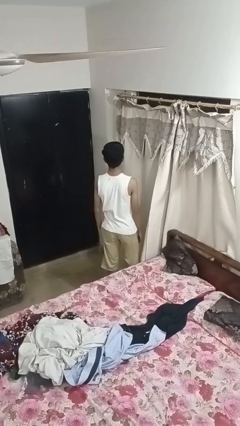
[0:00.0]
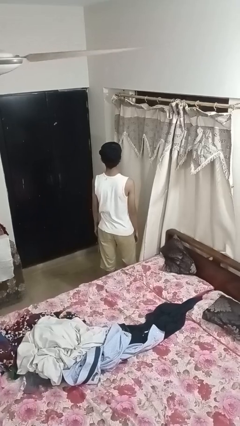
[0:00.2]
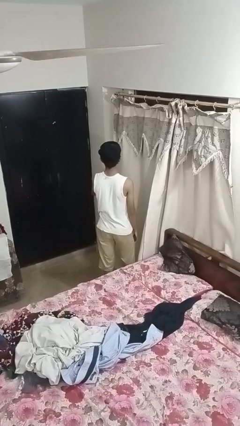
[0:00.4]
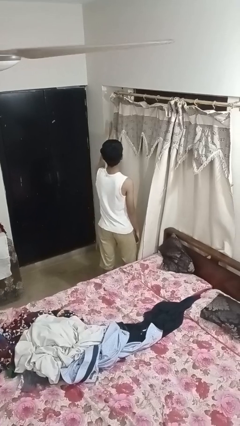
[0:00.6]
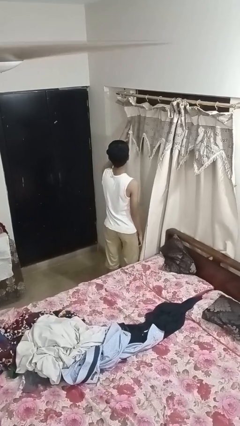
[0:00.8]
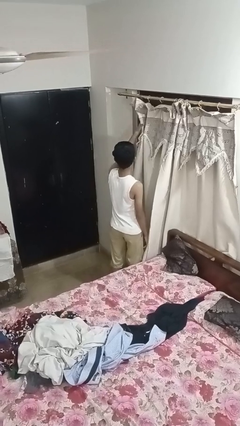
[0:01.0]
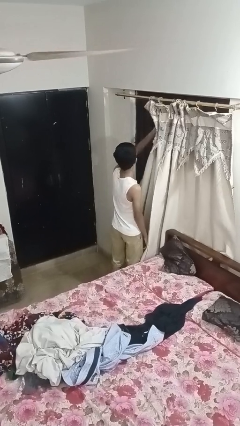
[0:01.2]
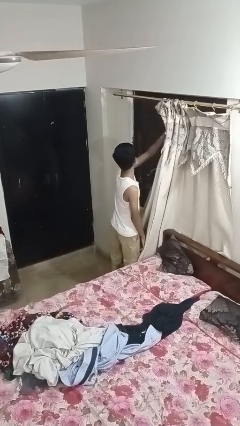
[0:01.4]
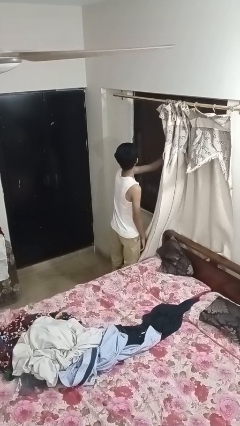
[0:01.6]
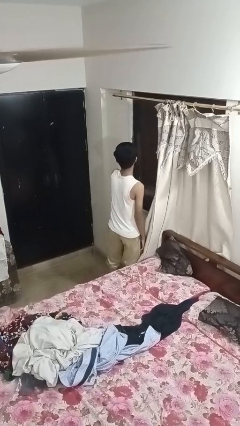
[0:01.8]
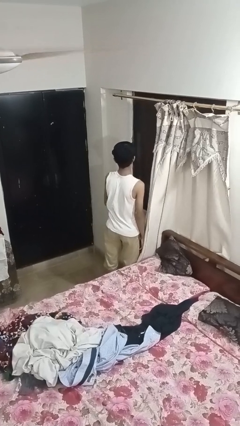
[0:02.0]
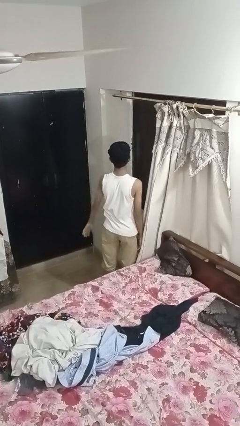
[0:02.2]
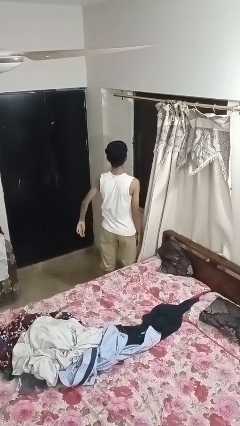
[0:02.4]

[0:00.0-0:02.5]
person opens curtains

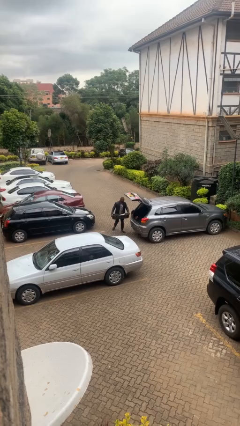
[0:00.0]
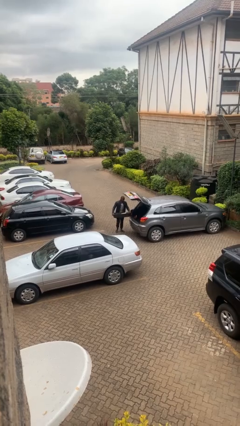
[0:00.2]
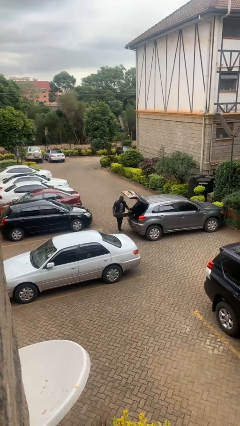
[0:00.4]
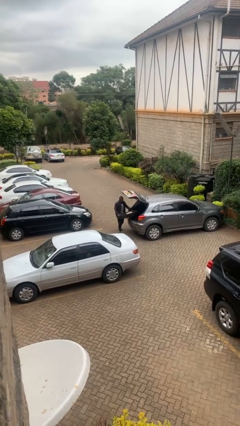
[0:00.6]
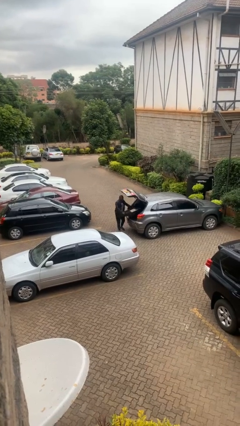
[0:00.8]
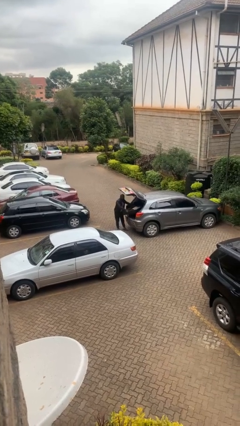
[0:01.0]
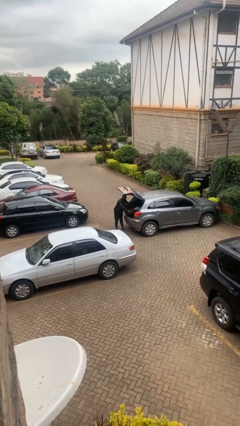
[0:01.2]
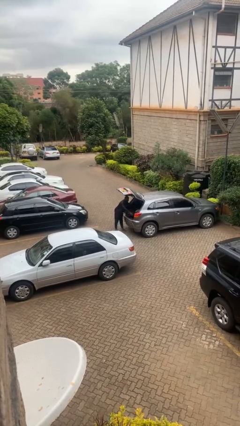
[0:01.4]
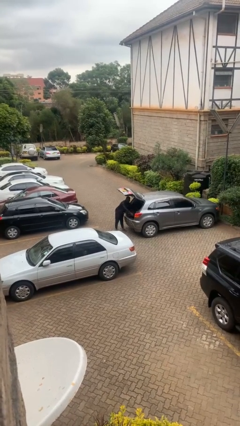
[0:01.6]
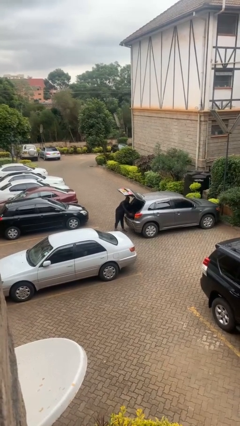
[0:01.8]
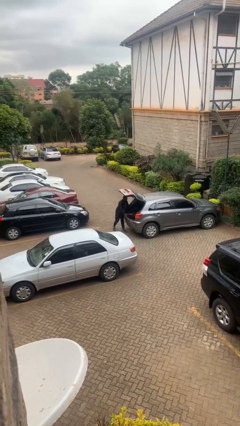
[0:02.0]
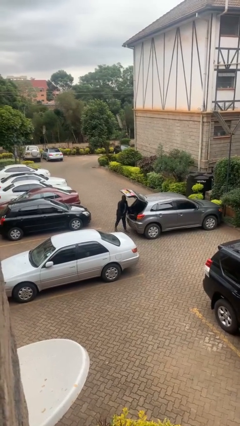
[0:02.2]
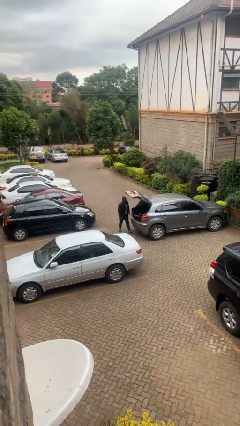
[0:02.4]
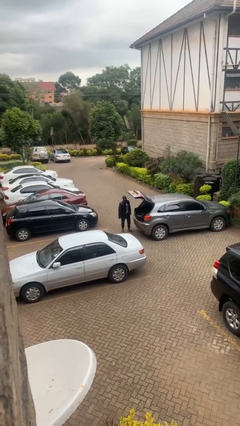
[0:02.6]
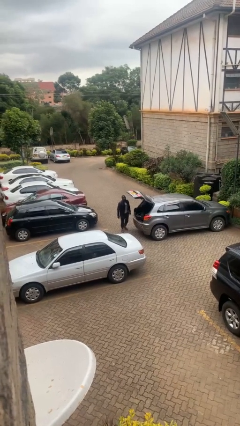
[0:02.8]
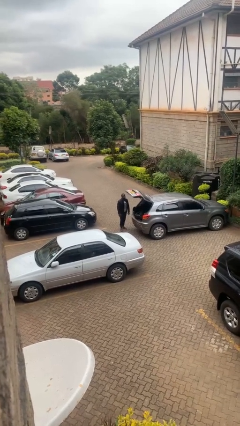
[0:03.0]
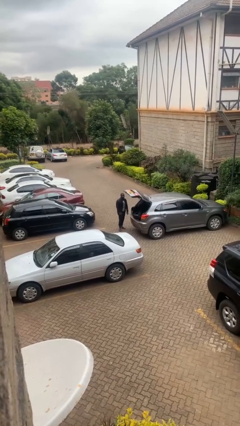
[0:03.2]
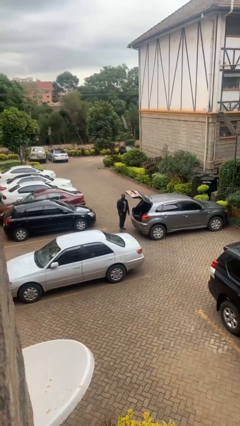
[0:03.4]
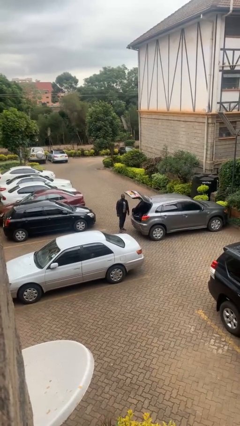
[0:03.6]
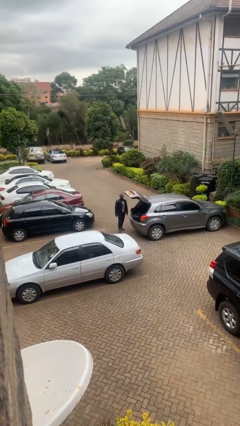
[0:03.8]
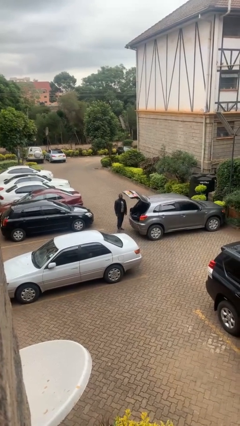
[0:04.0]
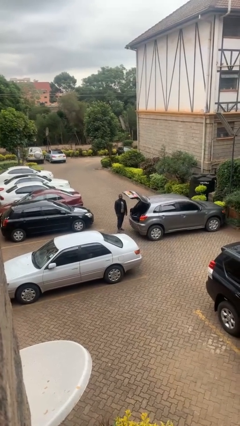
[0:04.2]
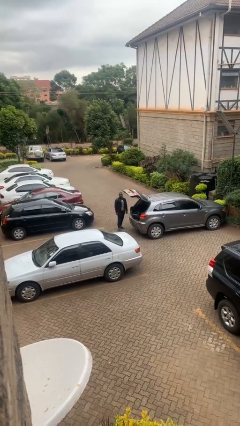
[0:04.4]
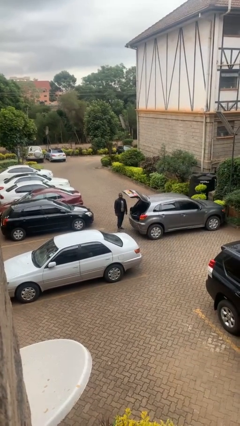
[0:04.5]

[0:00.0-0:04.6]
person loads car

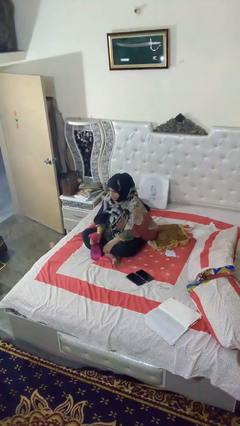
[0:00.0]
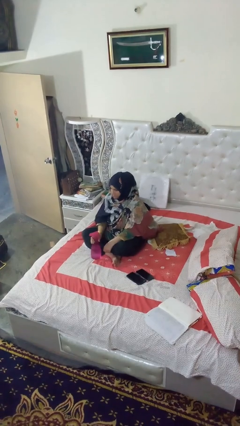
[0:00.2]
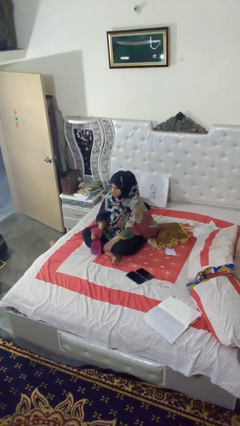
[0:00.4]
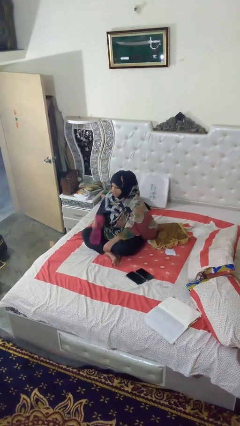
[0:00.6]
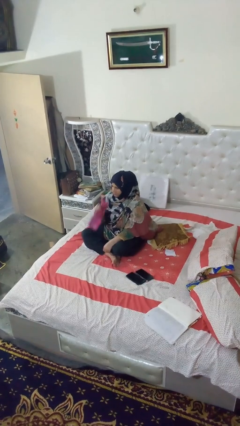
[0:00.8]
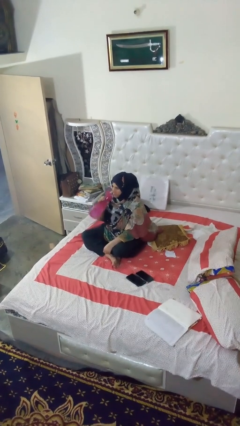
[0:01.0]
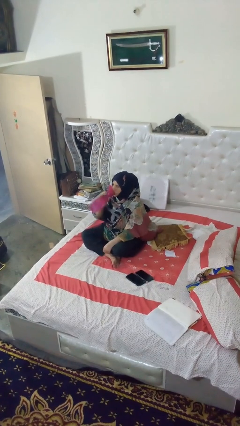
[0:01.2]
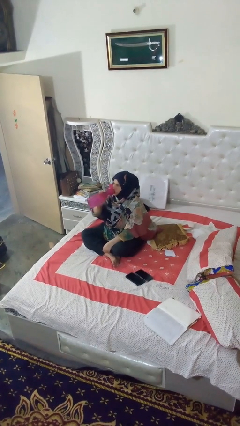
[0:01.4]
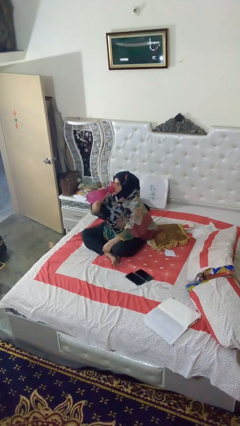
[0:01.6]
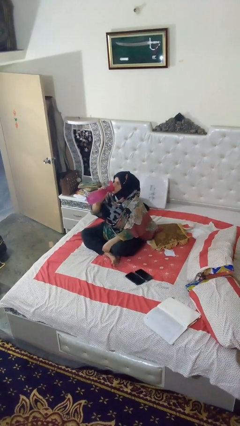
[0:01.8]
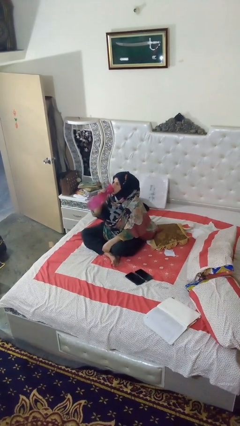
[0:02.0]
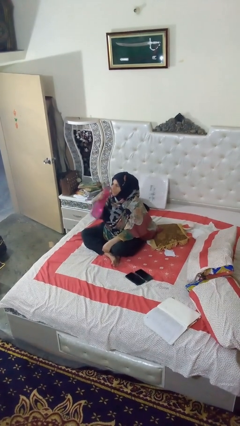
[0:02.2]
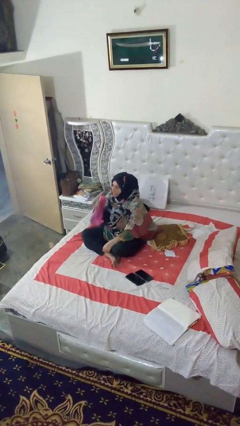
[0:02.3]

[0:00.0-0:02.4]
person drinks from bottle

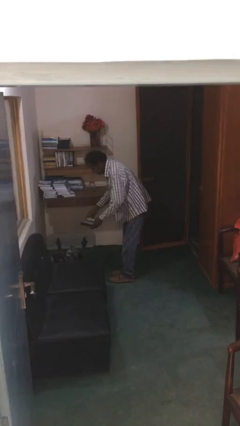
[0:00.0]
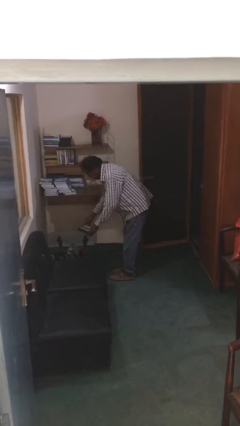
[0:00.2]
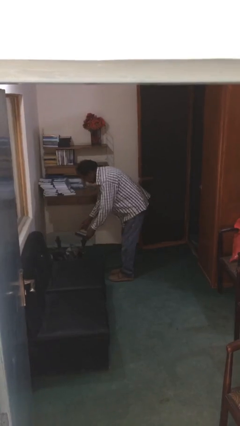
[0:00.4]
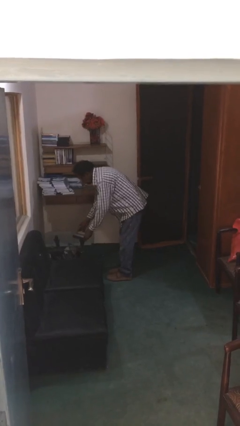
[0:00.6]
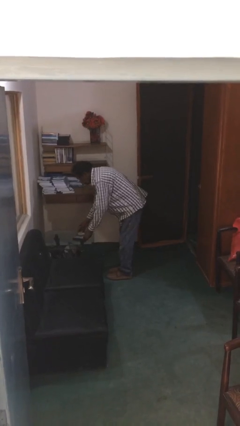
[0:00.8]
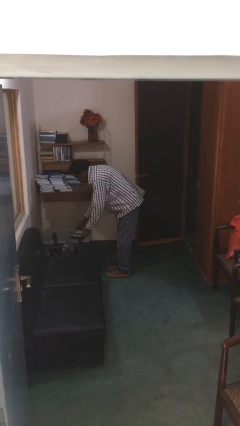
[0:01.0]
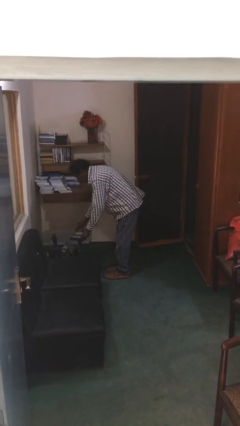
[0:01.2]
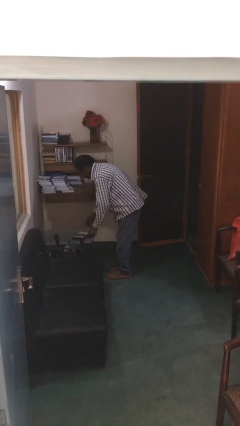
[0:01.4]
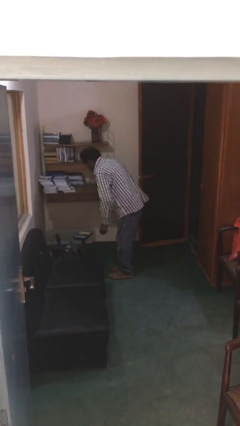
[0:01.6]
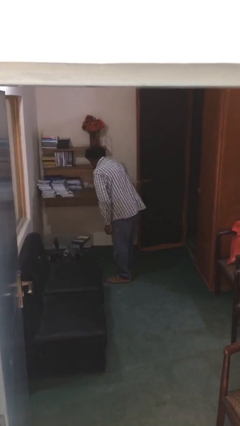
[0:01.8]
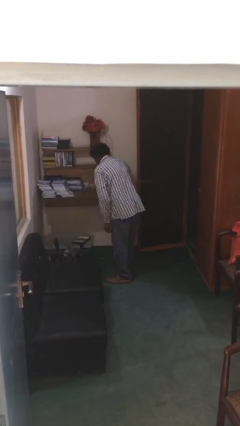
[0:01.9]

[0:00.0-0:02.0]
person puts down object on table

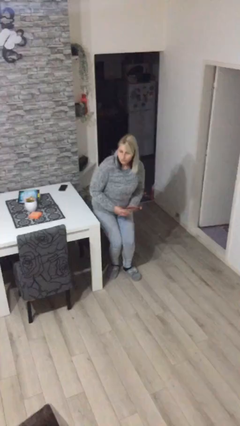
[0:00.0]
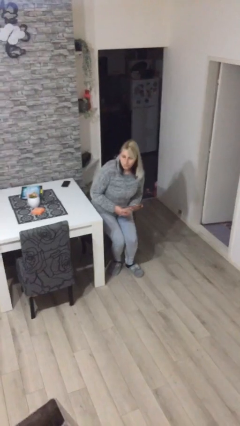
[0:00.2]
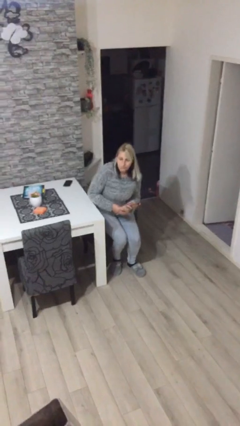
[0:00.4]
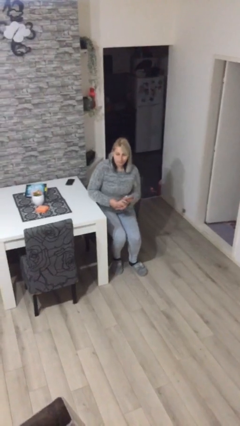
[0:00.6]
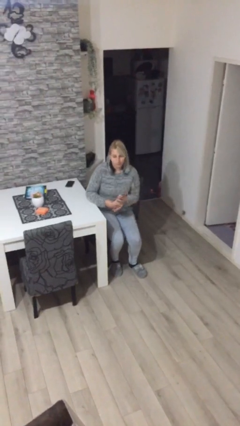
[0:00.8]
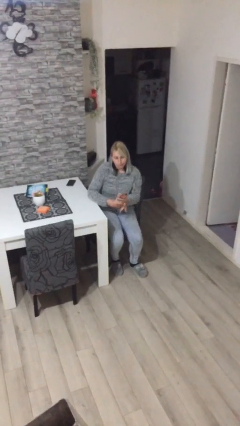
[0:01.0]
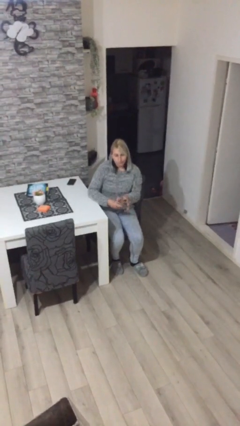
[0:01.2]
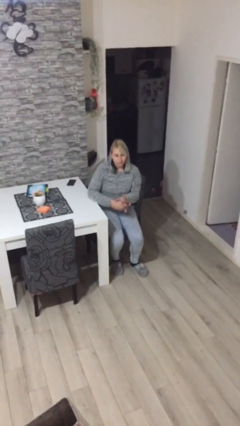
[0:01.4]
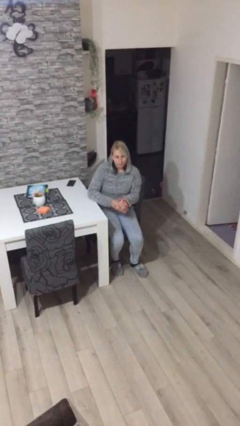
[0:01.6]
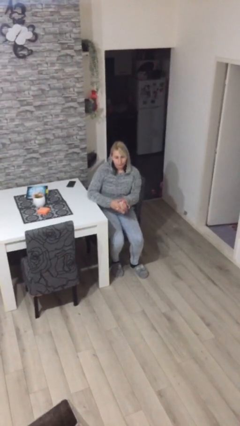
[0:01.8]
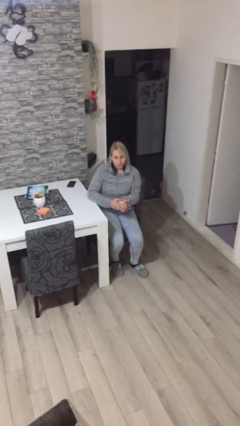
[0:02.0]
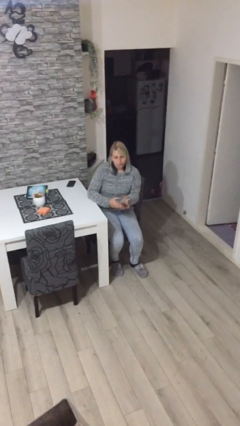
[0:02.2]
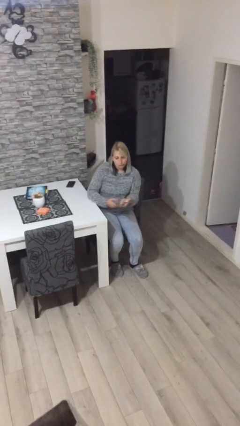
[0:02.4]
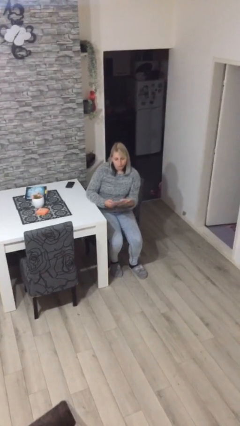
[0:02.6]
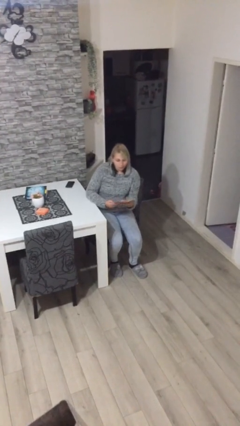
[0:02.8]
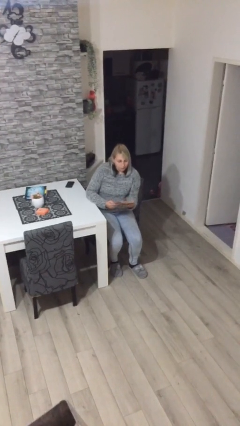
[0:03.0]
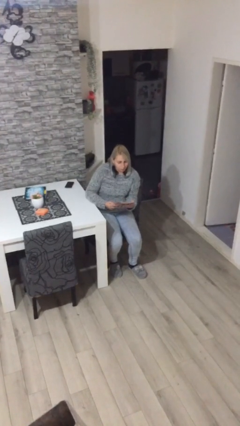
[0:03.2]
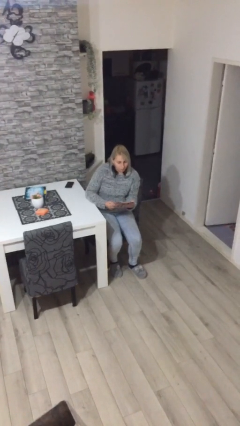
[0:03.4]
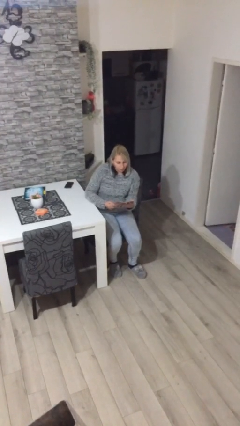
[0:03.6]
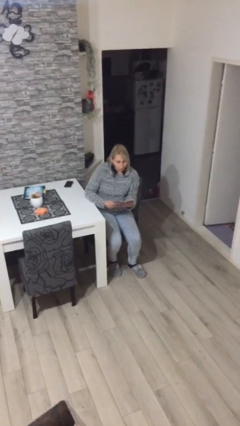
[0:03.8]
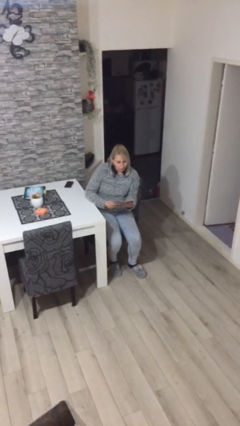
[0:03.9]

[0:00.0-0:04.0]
person sits down

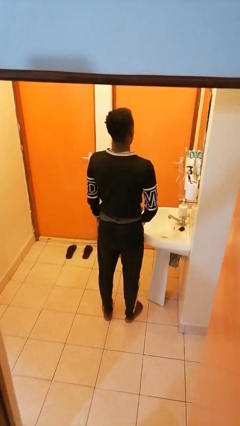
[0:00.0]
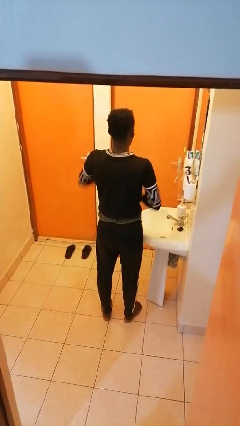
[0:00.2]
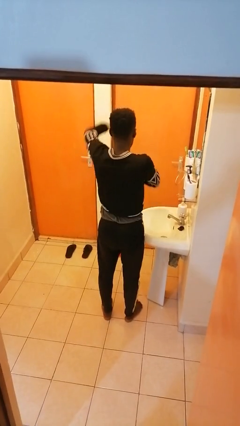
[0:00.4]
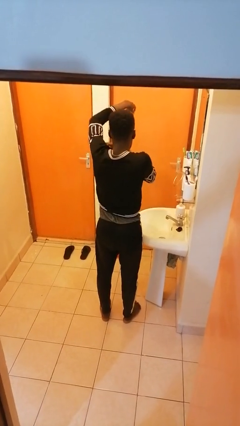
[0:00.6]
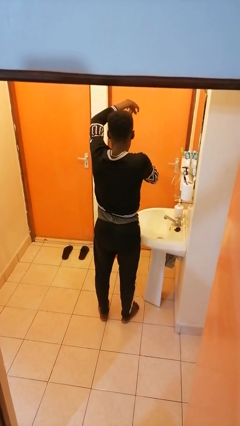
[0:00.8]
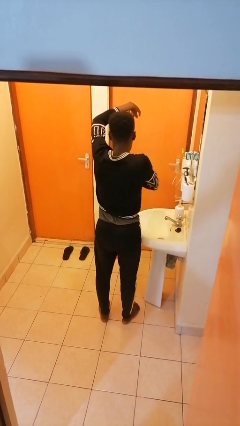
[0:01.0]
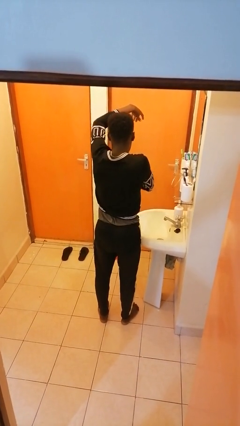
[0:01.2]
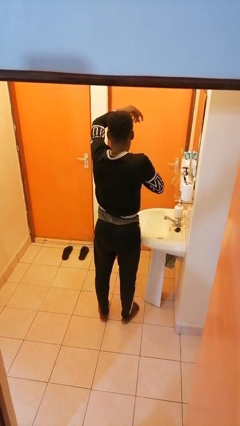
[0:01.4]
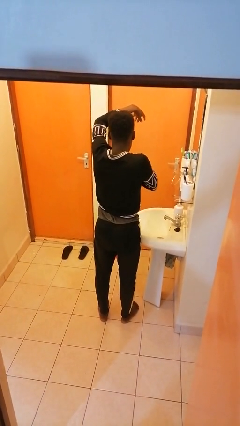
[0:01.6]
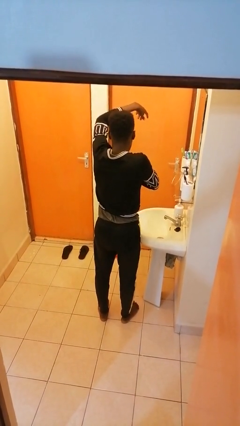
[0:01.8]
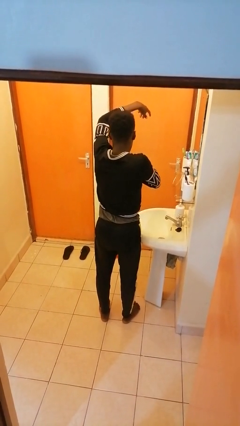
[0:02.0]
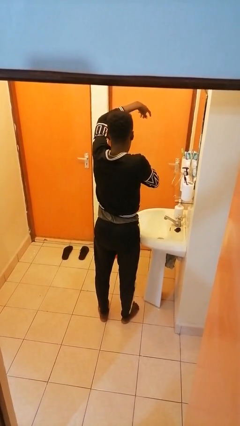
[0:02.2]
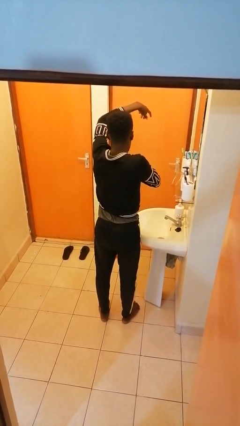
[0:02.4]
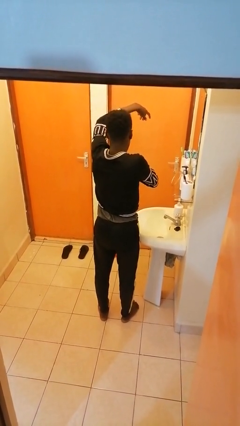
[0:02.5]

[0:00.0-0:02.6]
person applies deodorant
